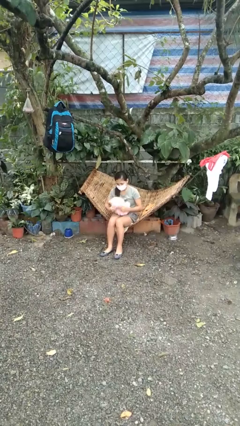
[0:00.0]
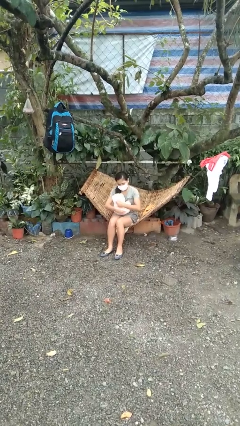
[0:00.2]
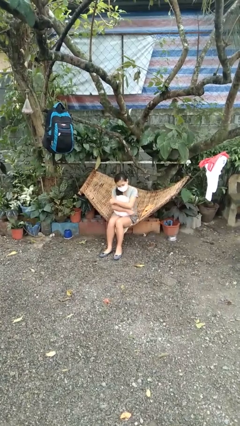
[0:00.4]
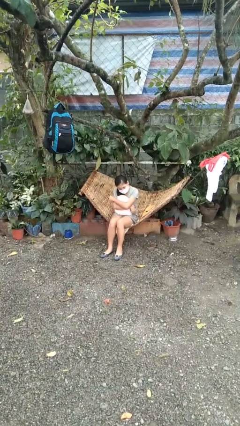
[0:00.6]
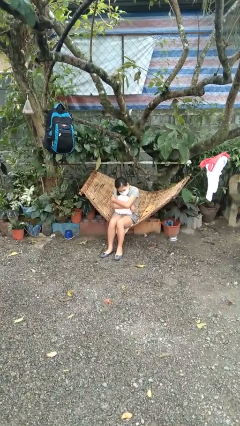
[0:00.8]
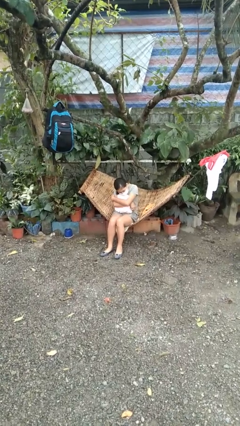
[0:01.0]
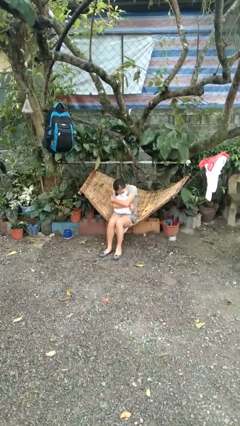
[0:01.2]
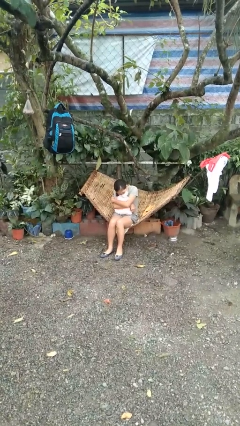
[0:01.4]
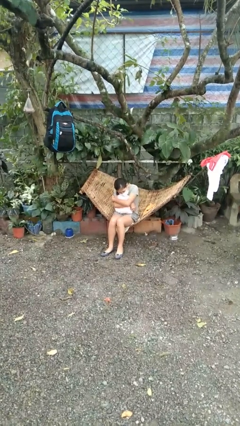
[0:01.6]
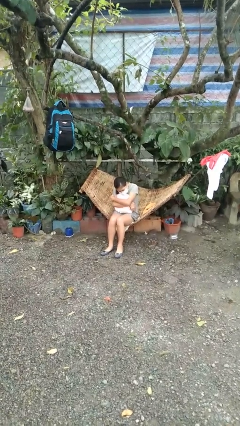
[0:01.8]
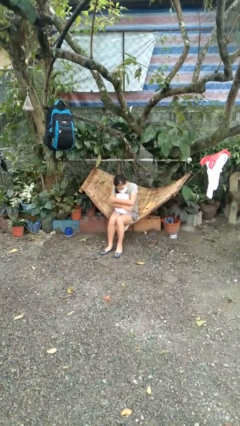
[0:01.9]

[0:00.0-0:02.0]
person hugs stuffed animal

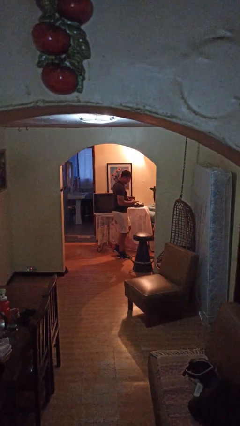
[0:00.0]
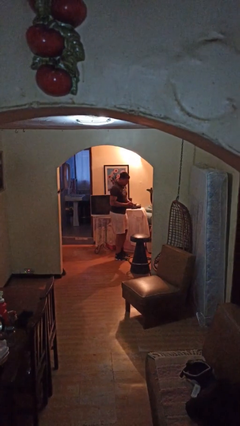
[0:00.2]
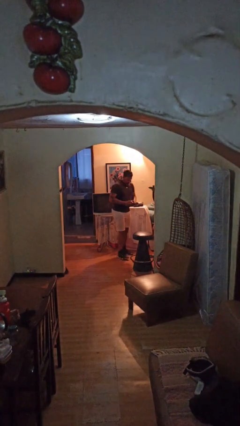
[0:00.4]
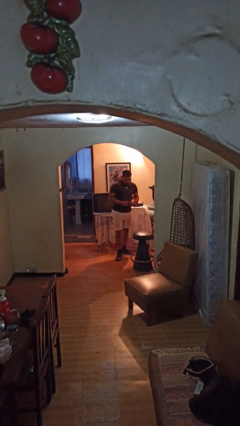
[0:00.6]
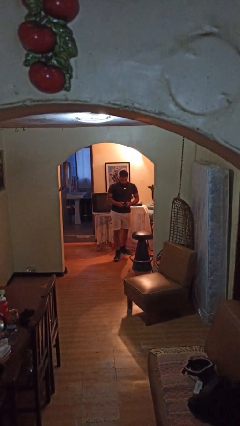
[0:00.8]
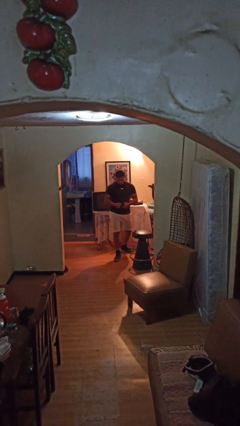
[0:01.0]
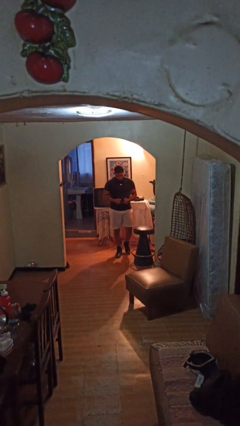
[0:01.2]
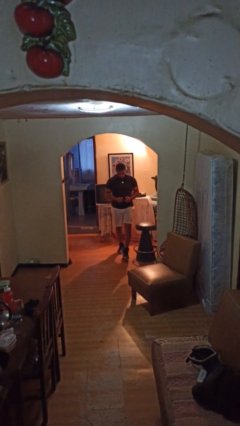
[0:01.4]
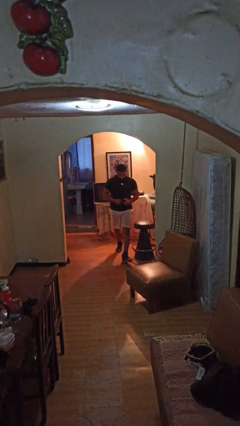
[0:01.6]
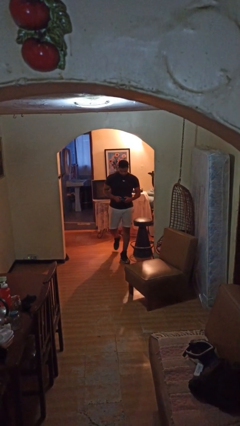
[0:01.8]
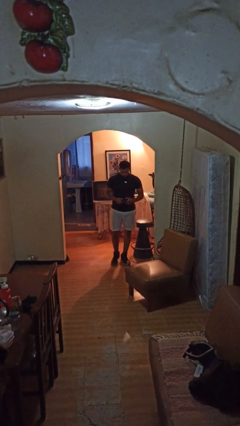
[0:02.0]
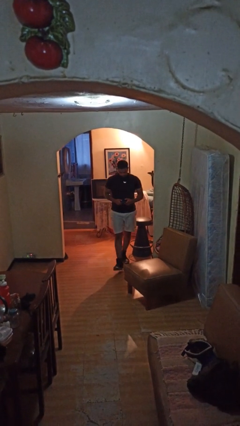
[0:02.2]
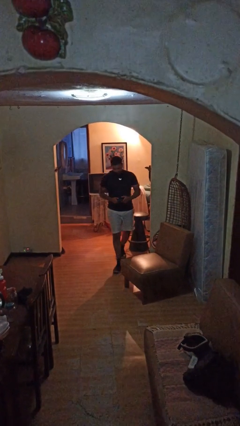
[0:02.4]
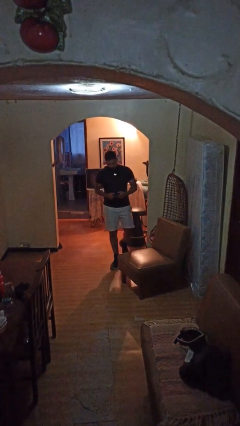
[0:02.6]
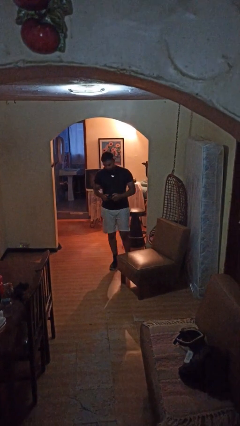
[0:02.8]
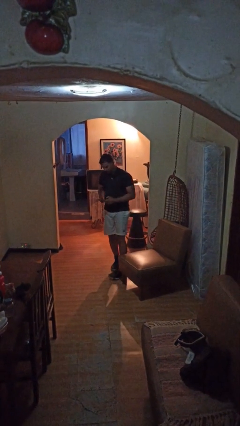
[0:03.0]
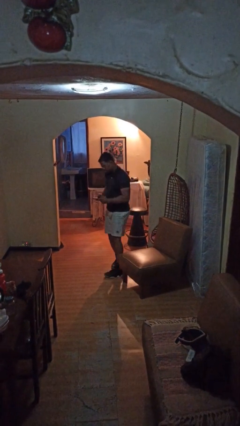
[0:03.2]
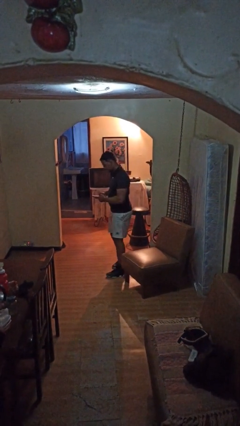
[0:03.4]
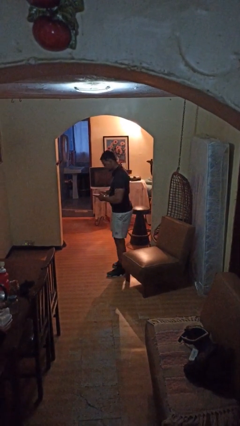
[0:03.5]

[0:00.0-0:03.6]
person enters scene through structure

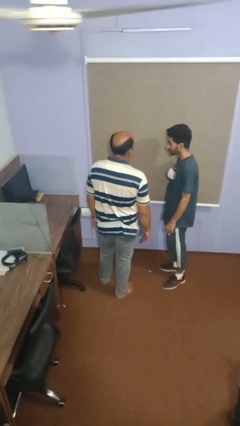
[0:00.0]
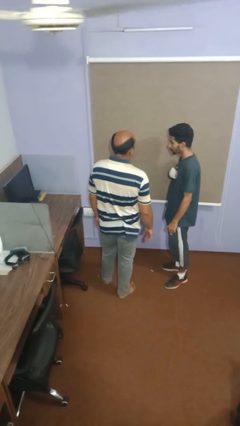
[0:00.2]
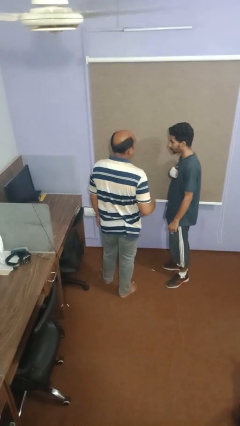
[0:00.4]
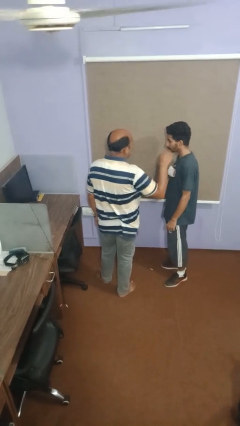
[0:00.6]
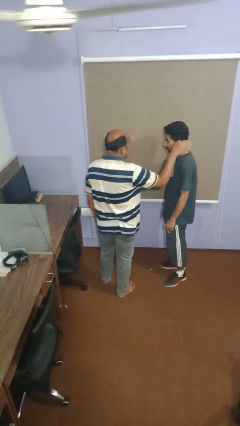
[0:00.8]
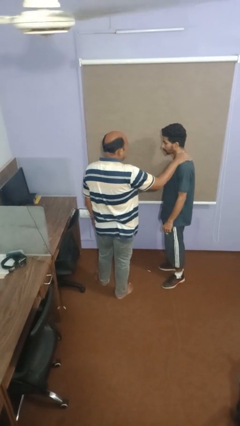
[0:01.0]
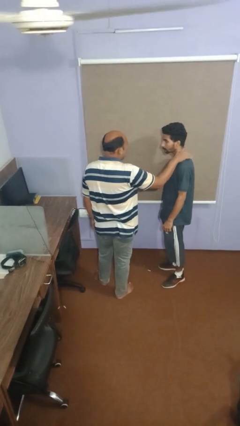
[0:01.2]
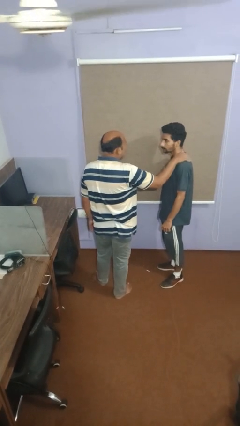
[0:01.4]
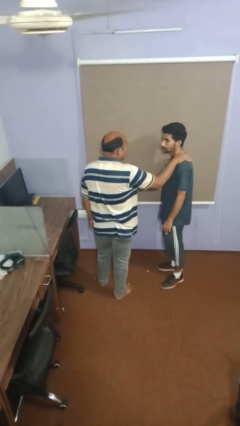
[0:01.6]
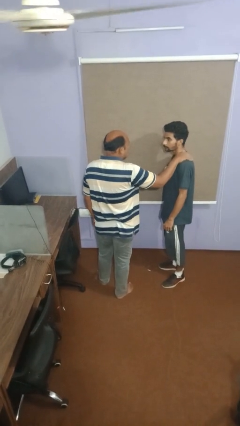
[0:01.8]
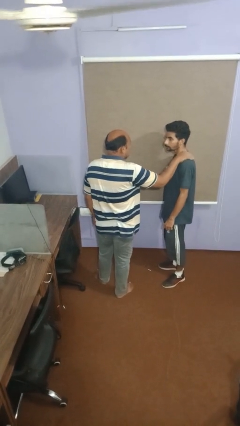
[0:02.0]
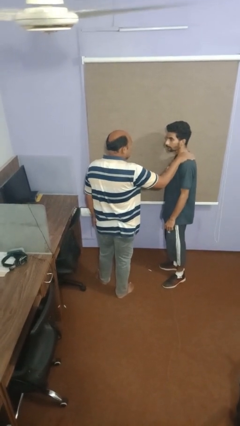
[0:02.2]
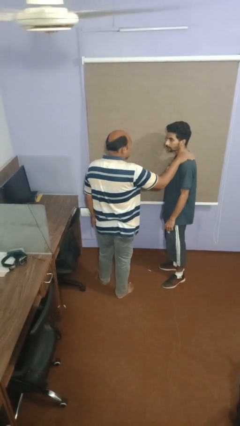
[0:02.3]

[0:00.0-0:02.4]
person pounds shoulders of person

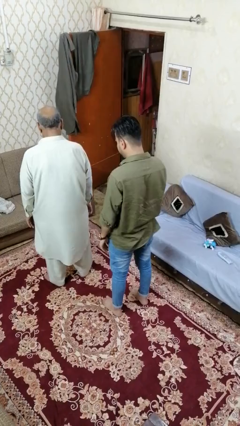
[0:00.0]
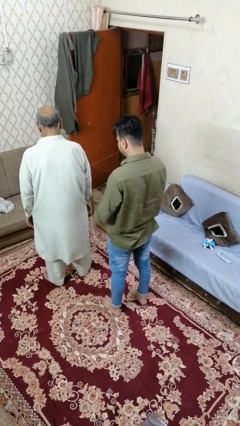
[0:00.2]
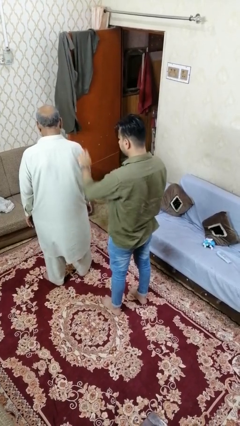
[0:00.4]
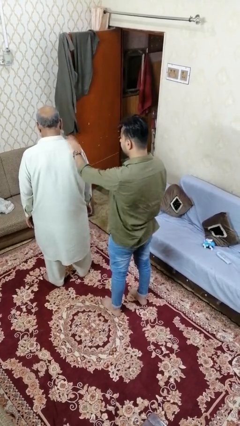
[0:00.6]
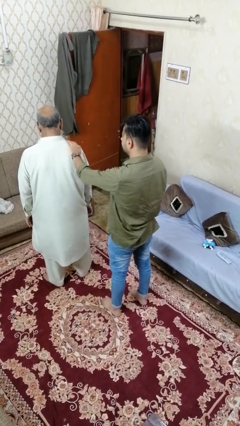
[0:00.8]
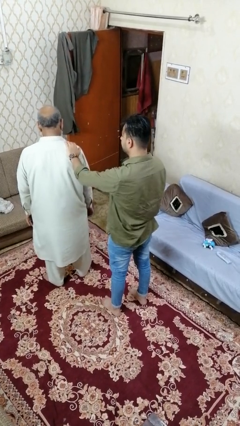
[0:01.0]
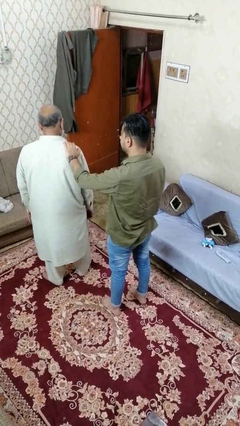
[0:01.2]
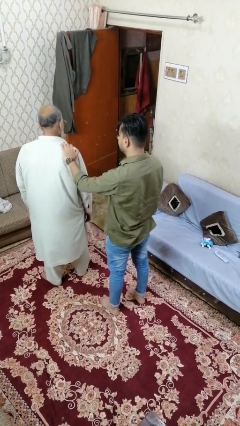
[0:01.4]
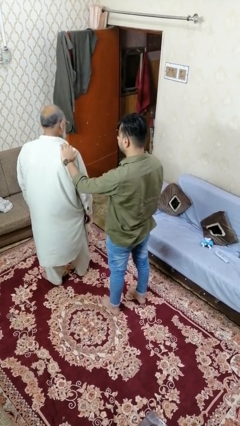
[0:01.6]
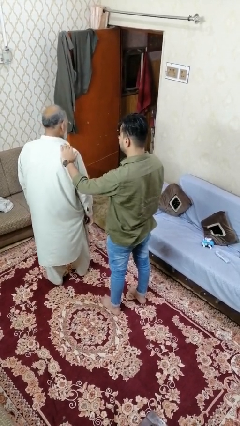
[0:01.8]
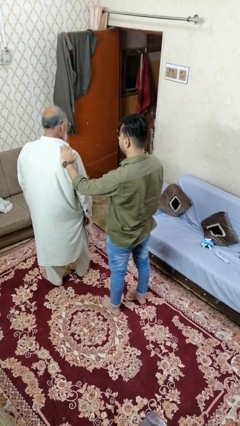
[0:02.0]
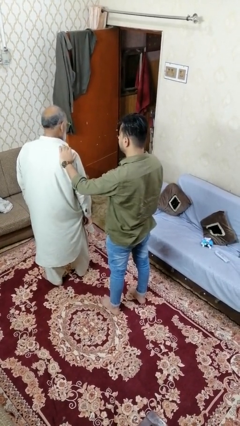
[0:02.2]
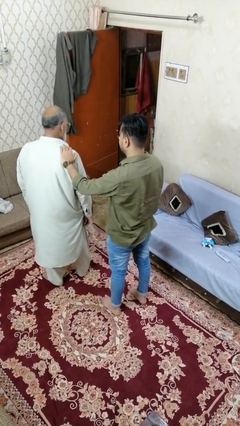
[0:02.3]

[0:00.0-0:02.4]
person touches back of person

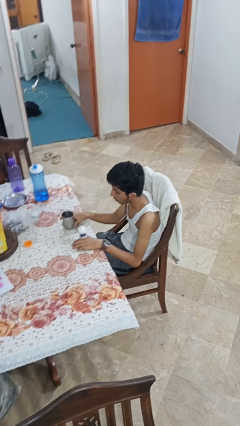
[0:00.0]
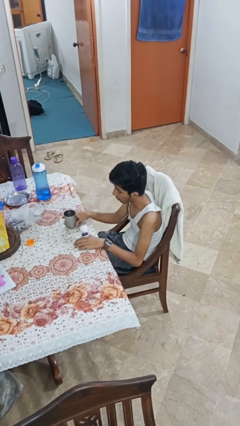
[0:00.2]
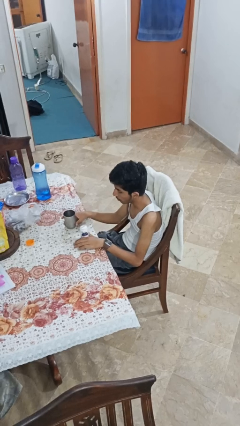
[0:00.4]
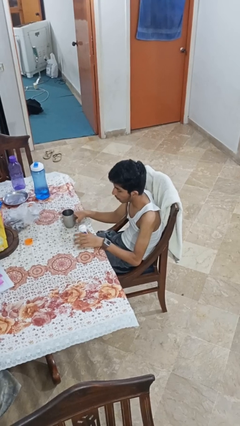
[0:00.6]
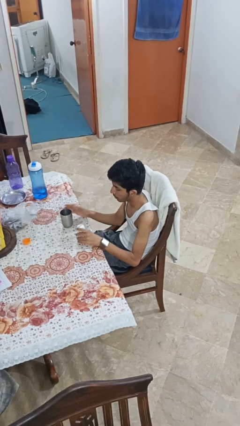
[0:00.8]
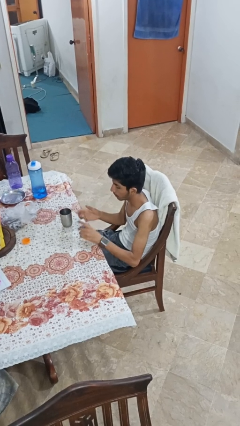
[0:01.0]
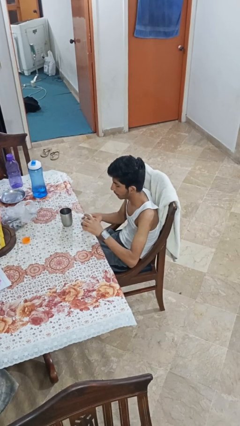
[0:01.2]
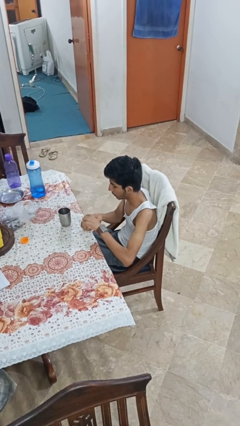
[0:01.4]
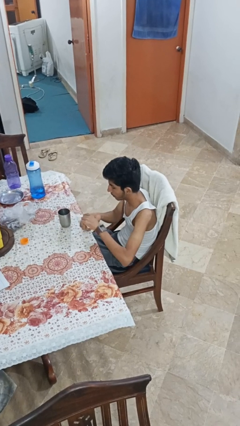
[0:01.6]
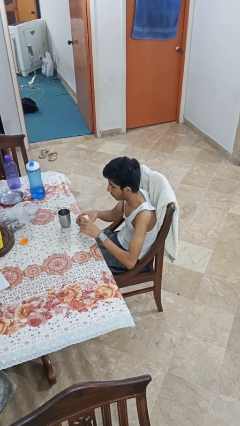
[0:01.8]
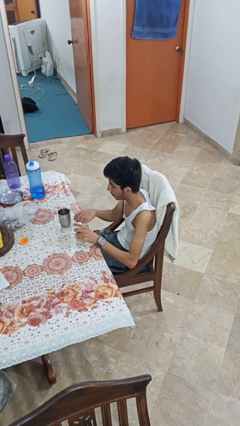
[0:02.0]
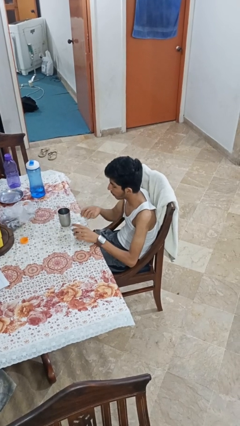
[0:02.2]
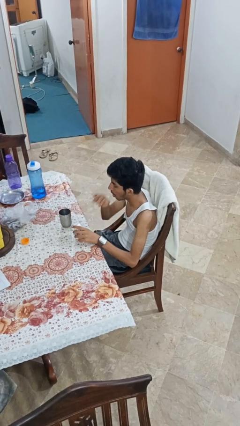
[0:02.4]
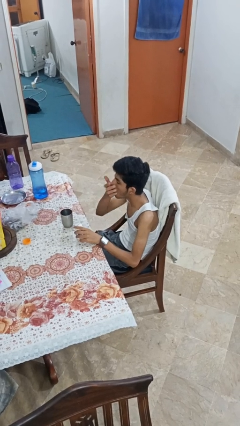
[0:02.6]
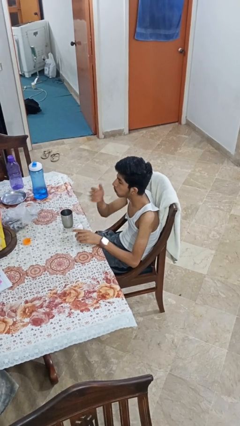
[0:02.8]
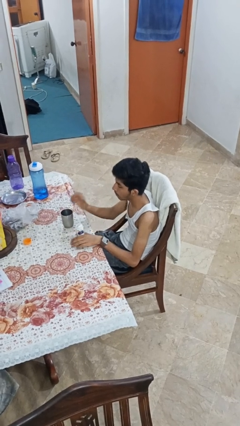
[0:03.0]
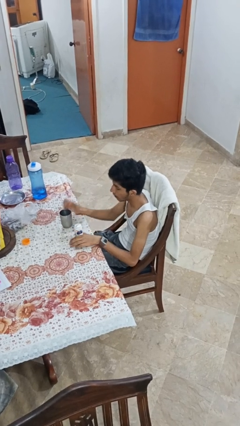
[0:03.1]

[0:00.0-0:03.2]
person takes medicine pills

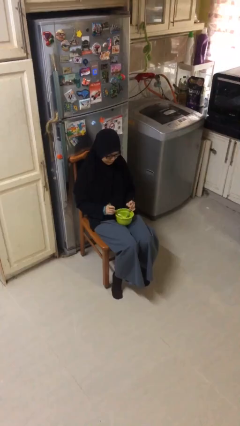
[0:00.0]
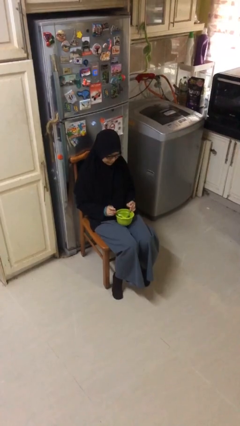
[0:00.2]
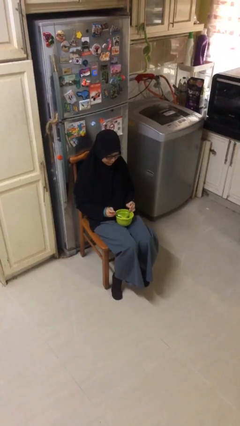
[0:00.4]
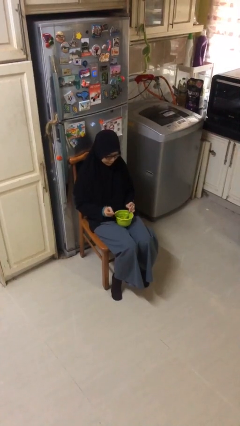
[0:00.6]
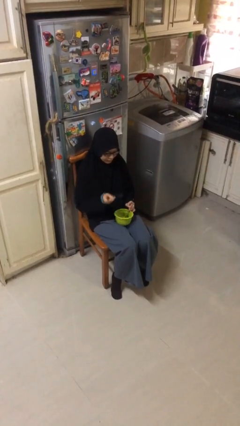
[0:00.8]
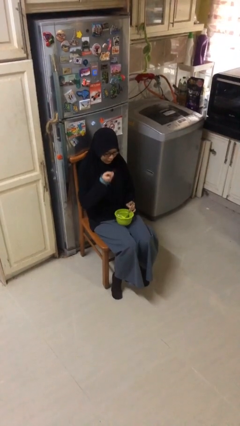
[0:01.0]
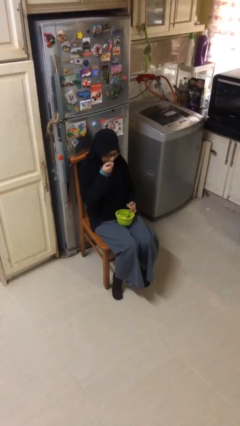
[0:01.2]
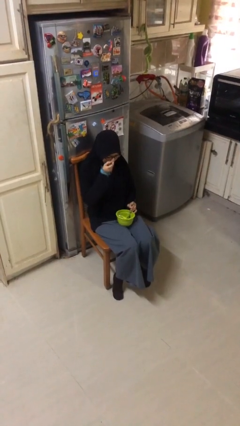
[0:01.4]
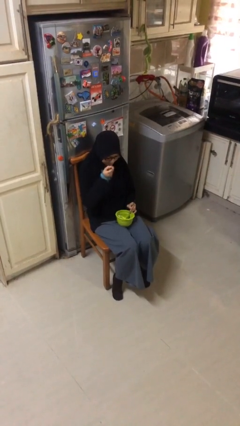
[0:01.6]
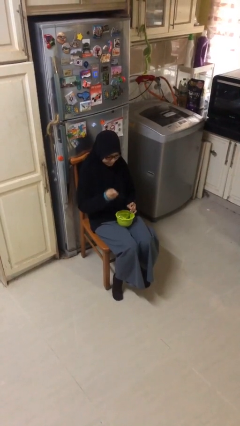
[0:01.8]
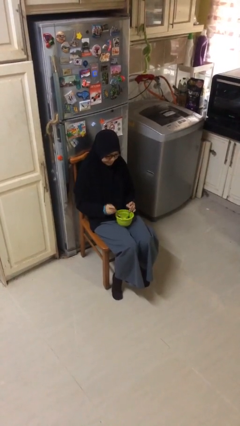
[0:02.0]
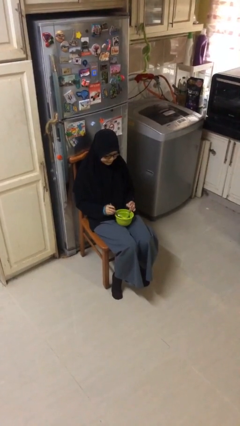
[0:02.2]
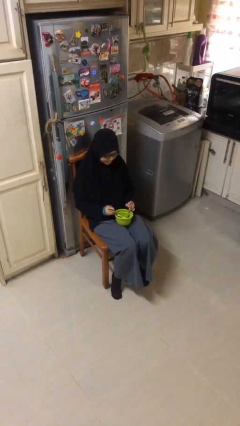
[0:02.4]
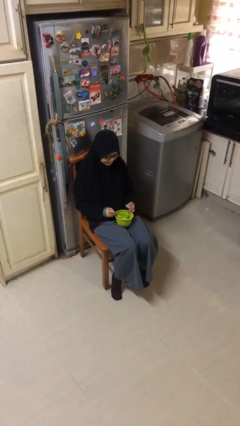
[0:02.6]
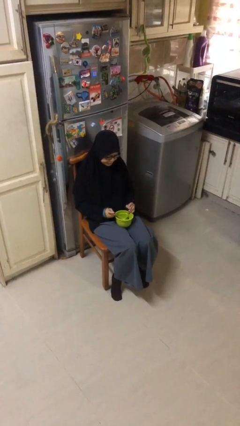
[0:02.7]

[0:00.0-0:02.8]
person eats with utensil

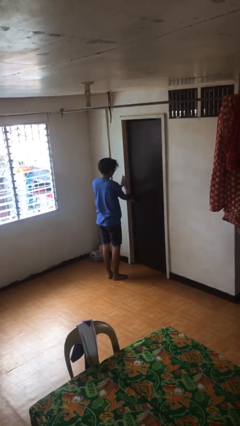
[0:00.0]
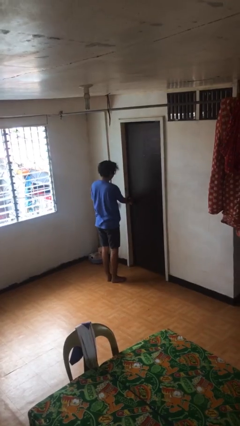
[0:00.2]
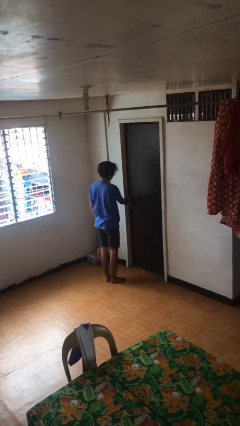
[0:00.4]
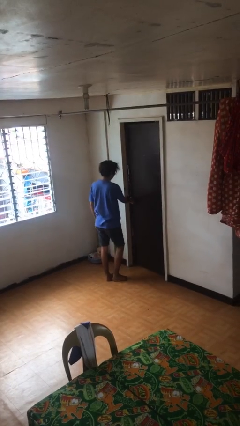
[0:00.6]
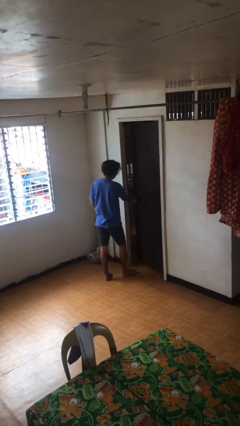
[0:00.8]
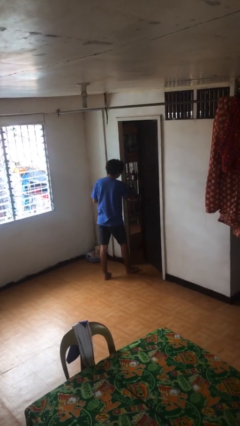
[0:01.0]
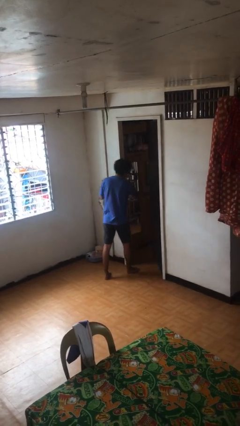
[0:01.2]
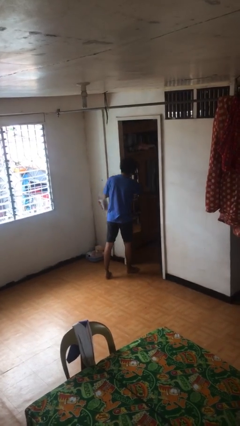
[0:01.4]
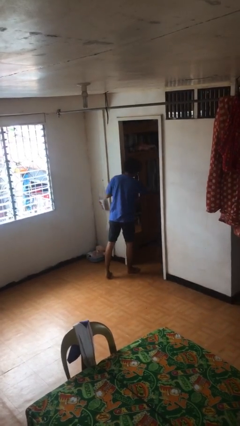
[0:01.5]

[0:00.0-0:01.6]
person opens facility door
